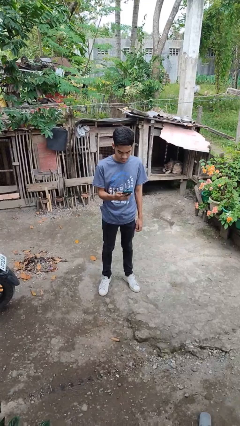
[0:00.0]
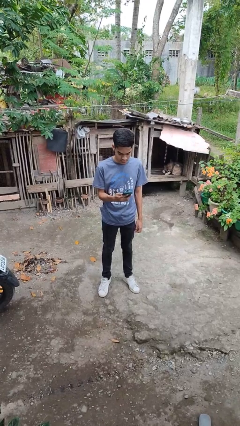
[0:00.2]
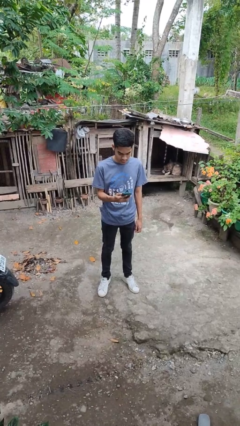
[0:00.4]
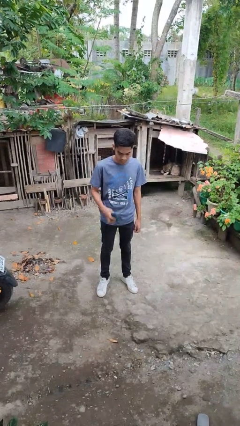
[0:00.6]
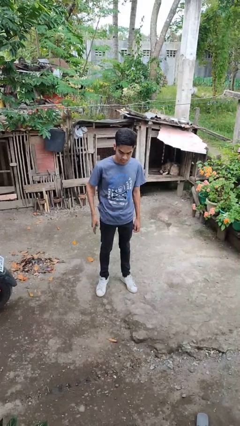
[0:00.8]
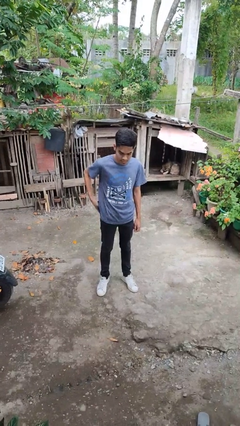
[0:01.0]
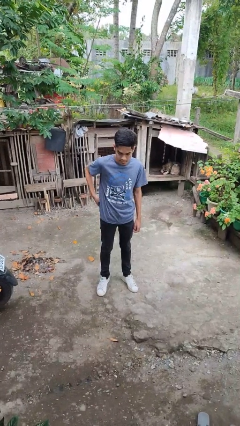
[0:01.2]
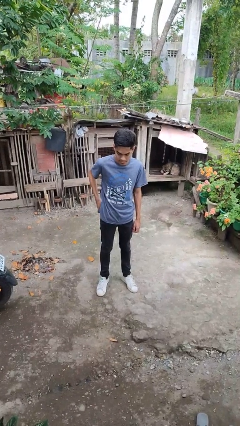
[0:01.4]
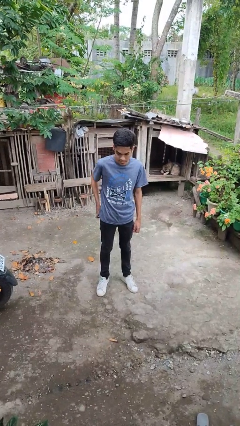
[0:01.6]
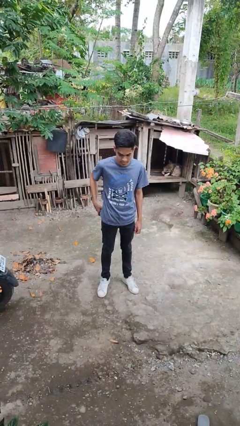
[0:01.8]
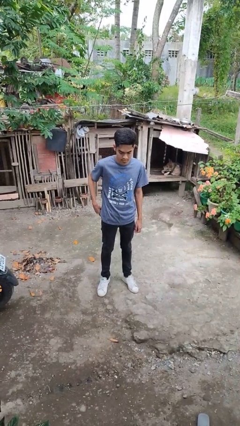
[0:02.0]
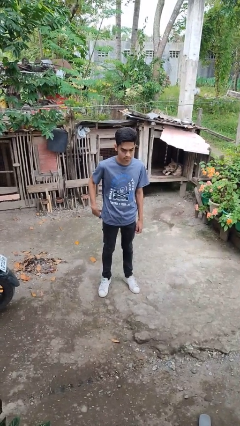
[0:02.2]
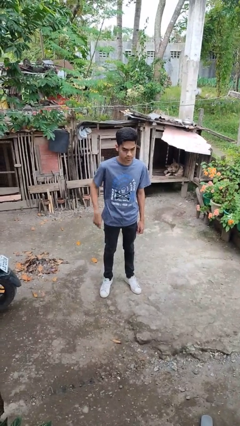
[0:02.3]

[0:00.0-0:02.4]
person puts phone into pocket

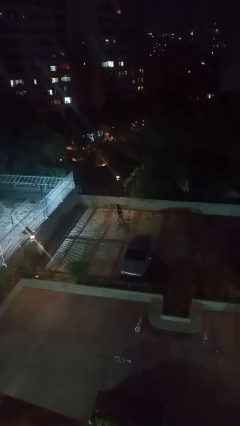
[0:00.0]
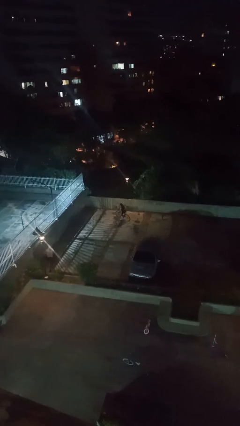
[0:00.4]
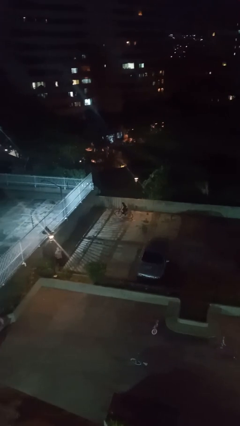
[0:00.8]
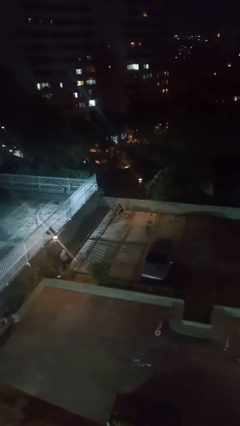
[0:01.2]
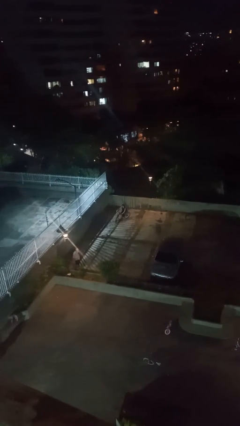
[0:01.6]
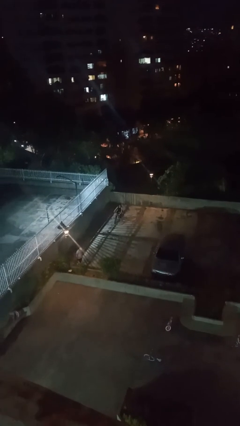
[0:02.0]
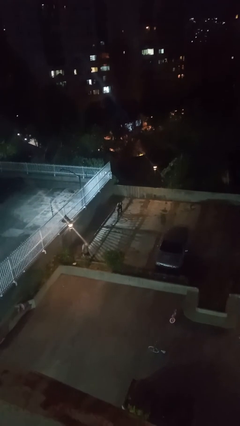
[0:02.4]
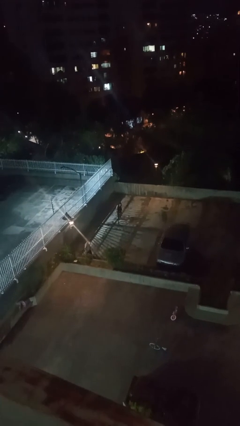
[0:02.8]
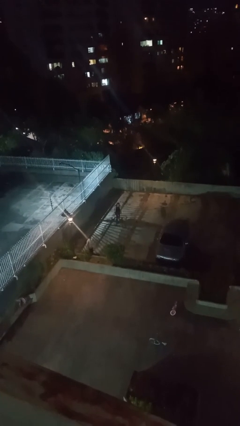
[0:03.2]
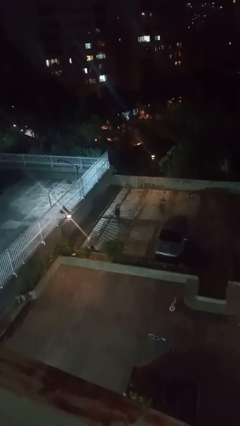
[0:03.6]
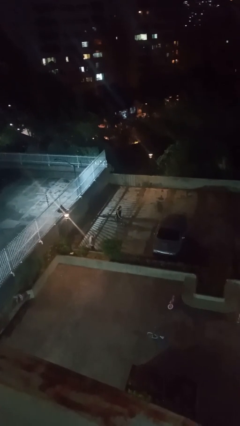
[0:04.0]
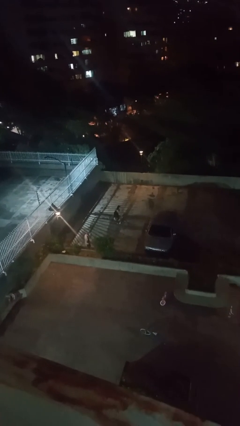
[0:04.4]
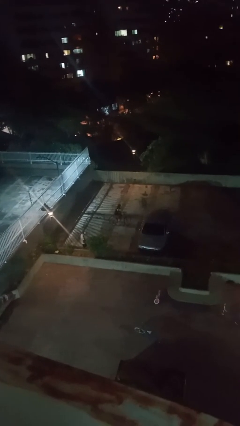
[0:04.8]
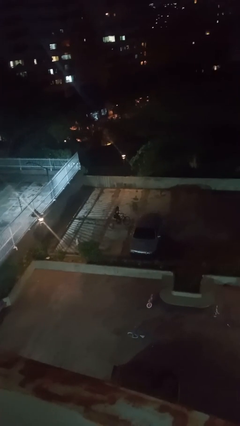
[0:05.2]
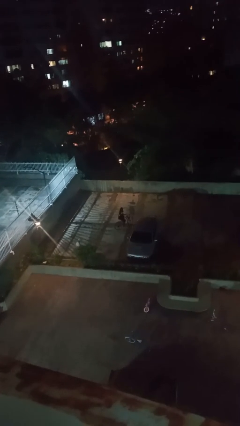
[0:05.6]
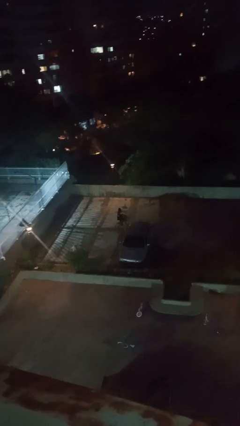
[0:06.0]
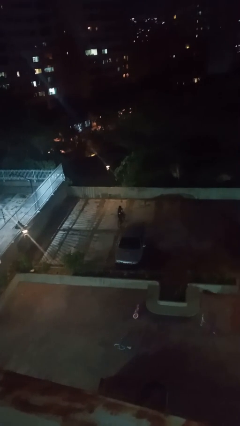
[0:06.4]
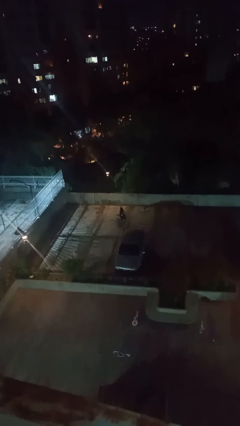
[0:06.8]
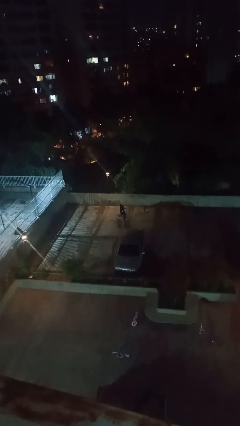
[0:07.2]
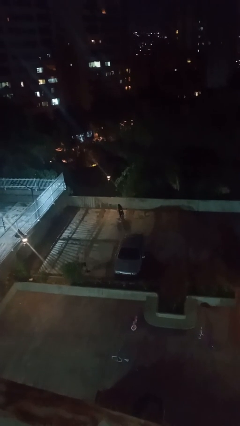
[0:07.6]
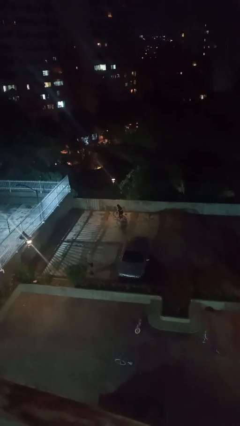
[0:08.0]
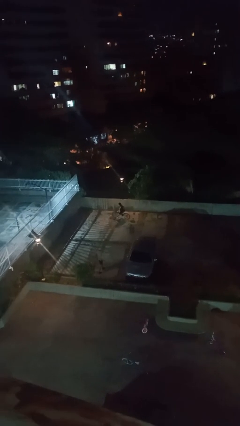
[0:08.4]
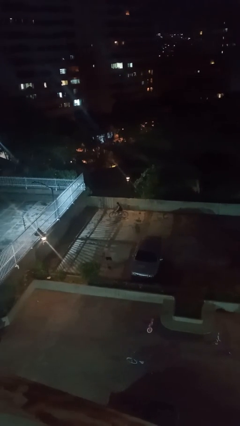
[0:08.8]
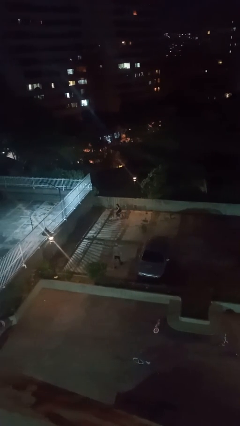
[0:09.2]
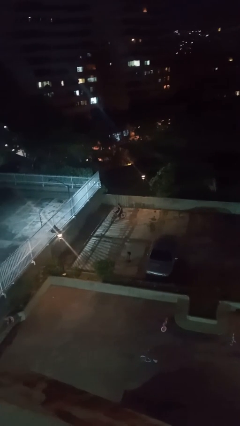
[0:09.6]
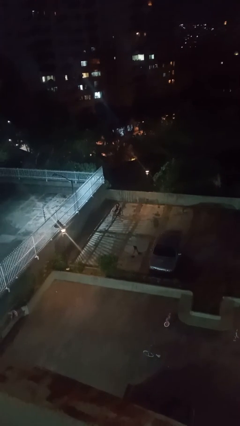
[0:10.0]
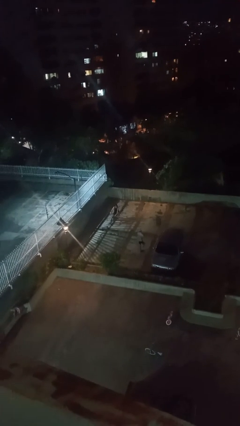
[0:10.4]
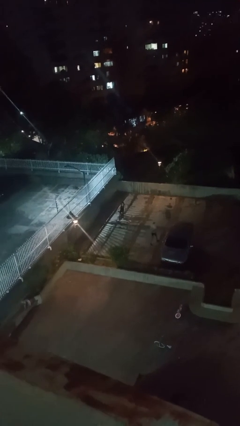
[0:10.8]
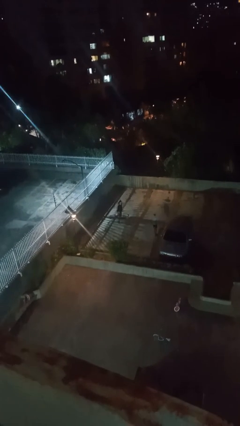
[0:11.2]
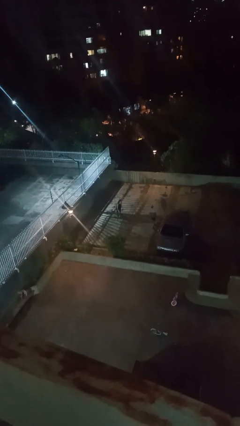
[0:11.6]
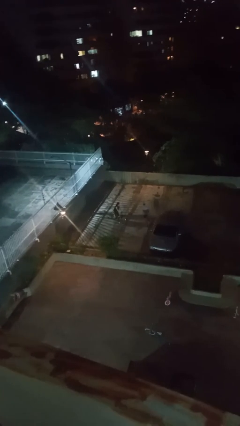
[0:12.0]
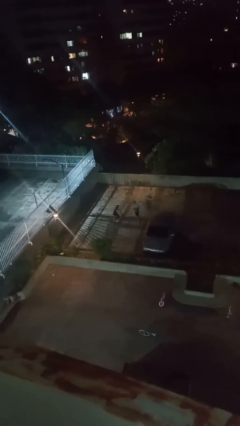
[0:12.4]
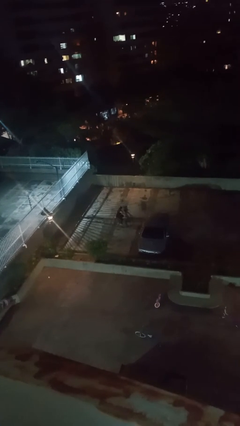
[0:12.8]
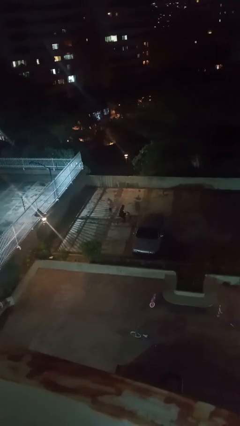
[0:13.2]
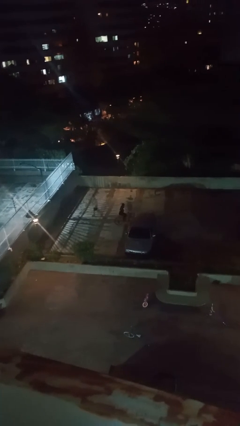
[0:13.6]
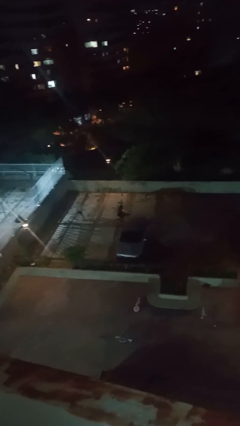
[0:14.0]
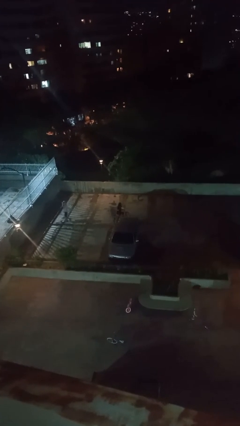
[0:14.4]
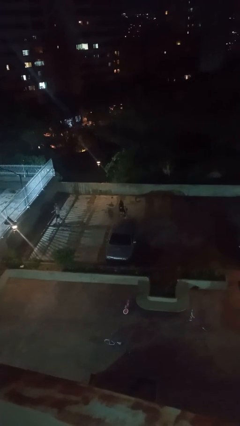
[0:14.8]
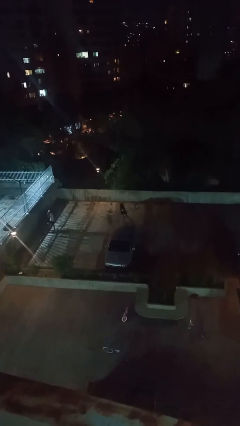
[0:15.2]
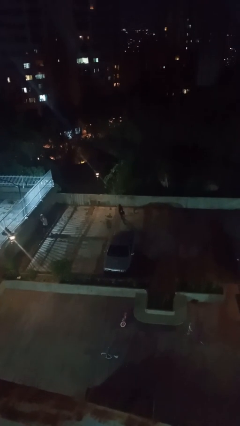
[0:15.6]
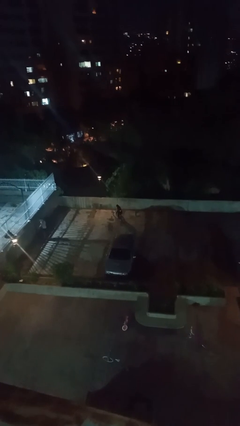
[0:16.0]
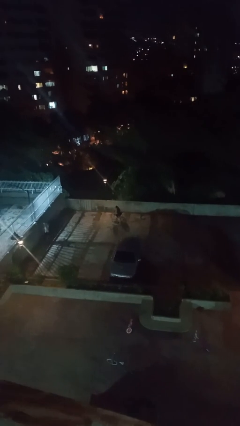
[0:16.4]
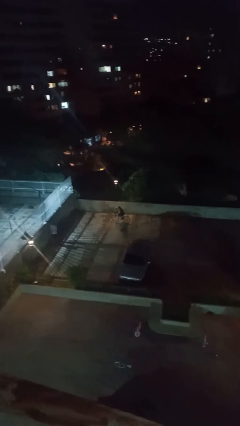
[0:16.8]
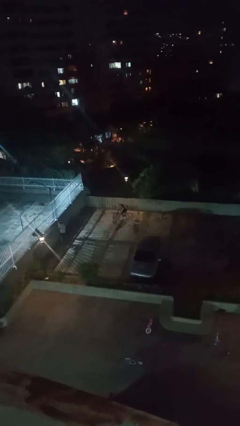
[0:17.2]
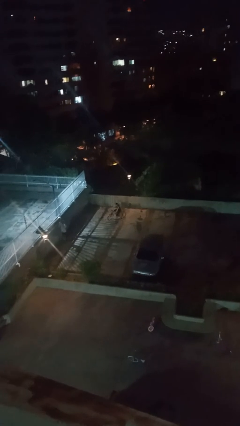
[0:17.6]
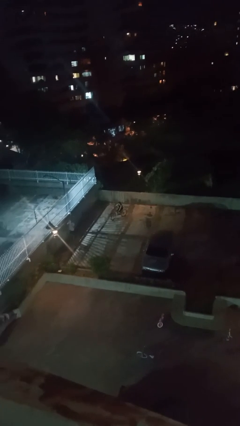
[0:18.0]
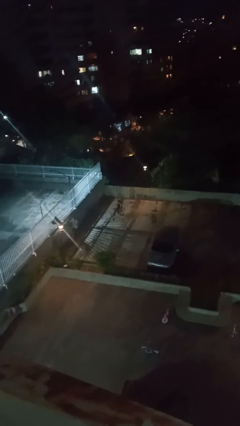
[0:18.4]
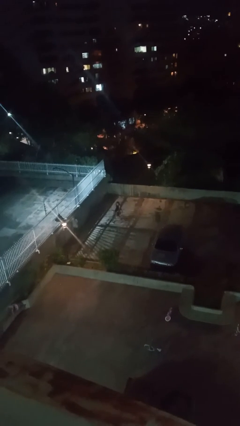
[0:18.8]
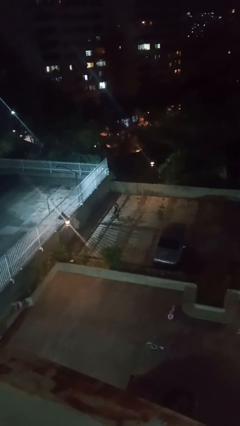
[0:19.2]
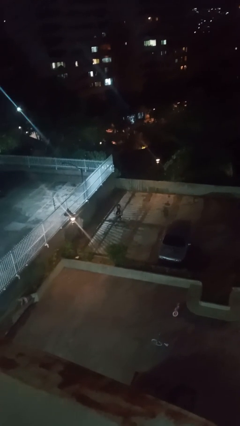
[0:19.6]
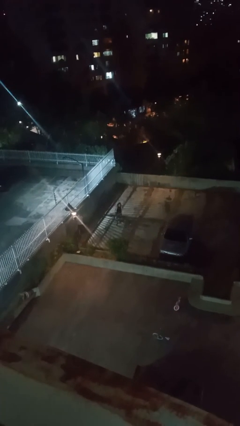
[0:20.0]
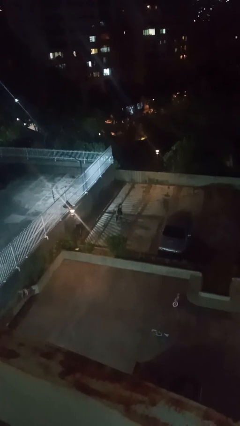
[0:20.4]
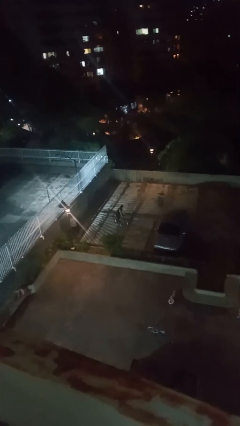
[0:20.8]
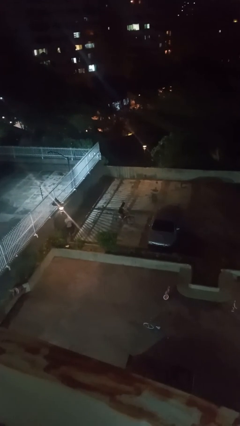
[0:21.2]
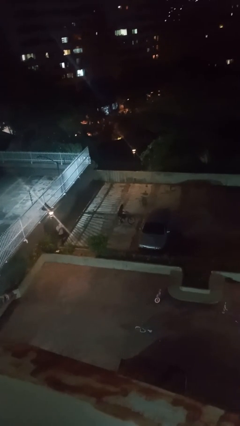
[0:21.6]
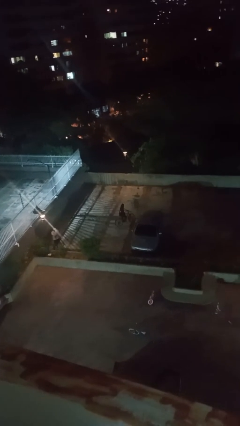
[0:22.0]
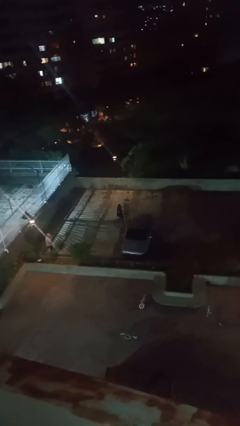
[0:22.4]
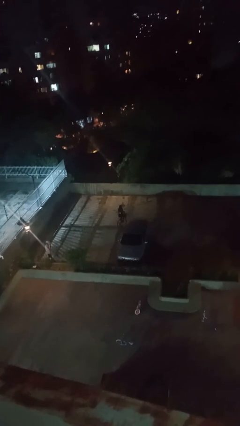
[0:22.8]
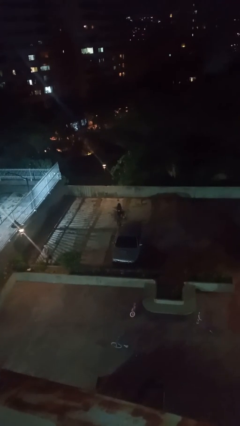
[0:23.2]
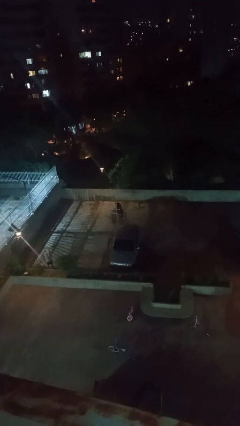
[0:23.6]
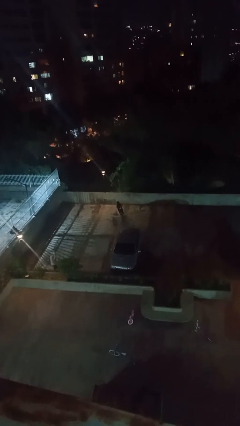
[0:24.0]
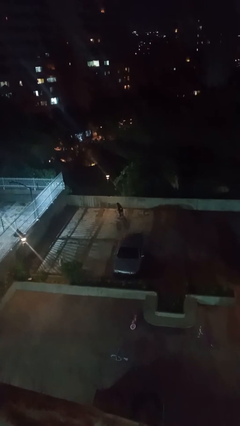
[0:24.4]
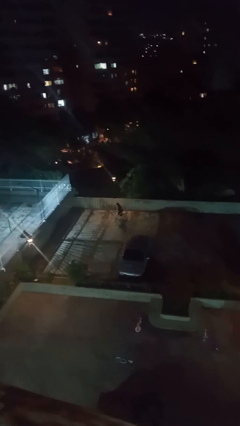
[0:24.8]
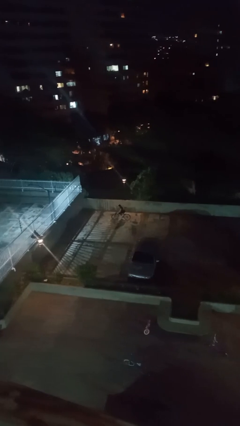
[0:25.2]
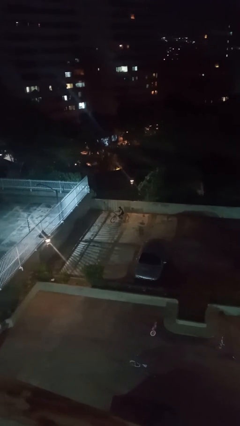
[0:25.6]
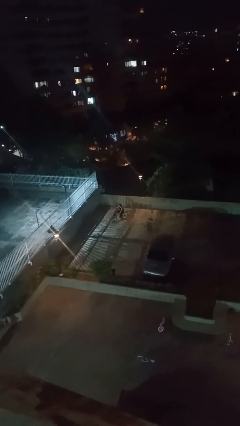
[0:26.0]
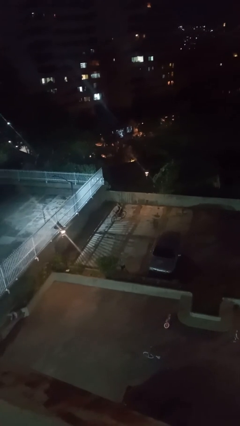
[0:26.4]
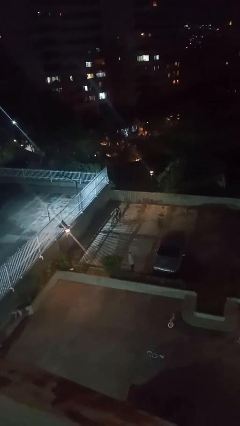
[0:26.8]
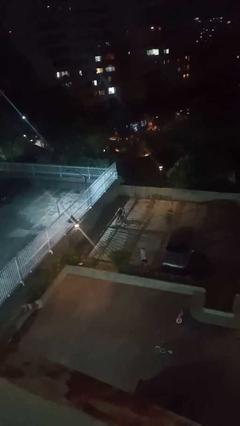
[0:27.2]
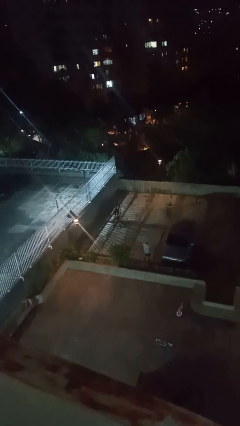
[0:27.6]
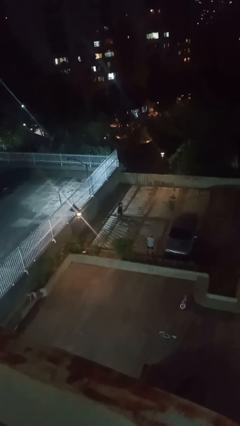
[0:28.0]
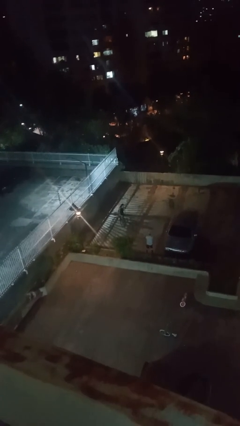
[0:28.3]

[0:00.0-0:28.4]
person rides bicycle

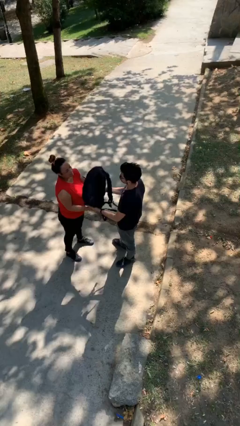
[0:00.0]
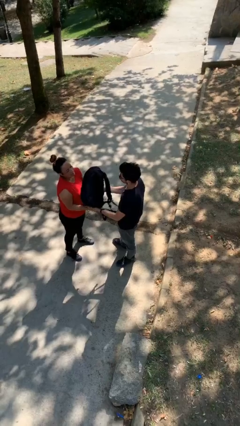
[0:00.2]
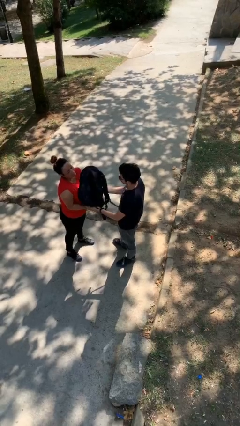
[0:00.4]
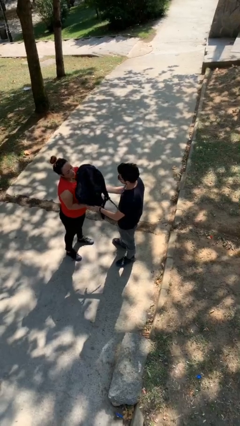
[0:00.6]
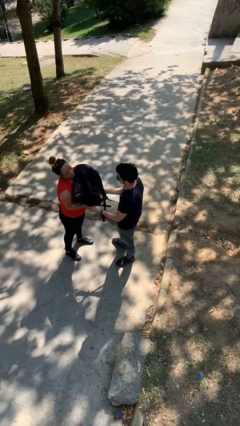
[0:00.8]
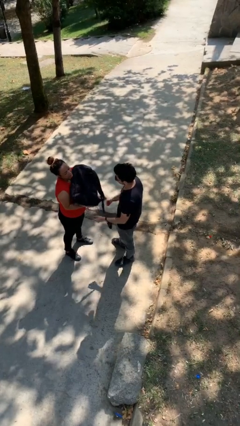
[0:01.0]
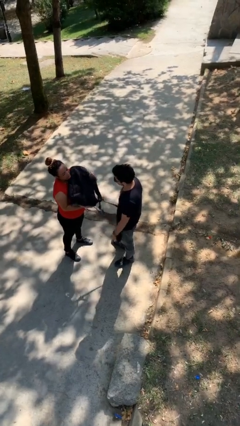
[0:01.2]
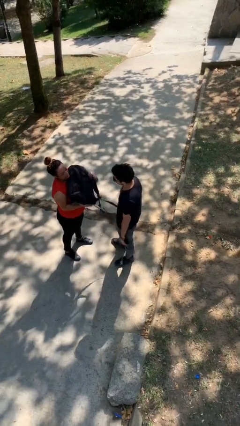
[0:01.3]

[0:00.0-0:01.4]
person transfers object to person
